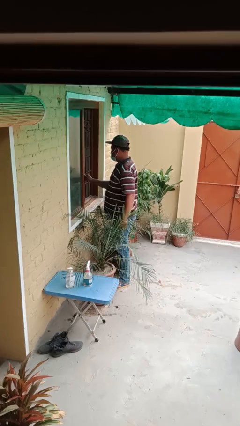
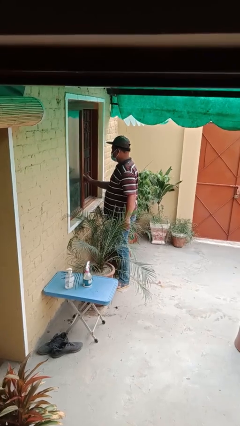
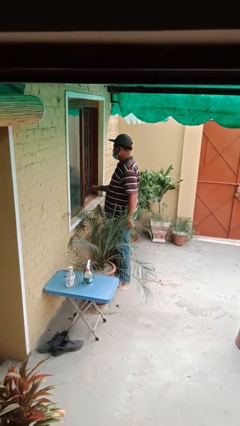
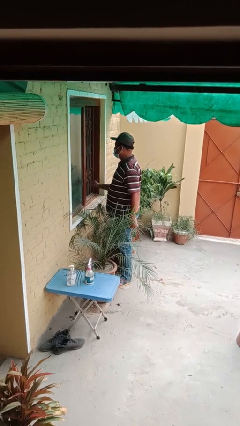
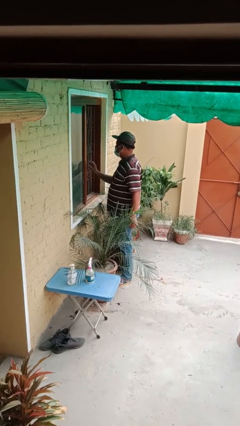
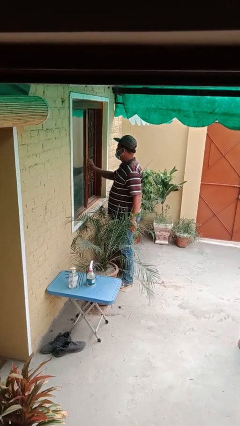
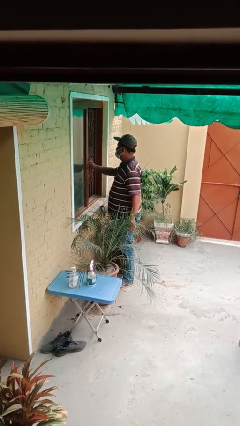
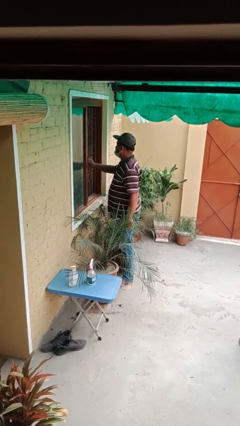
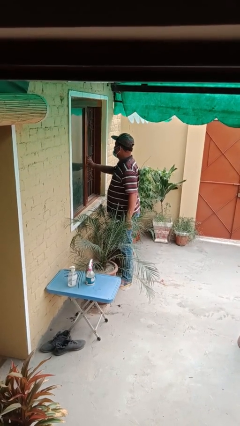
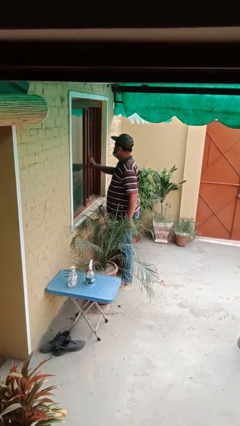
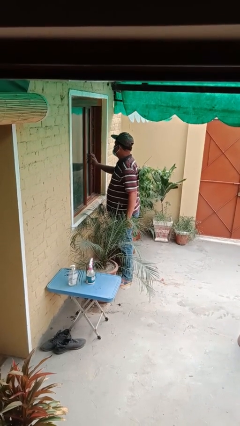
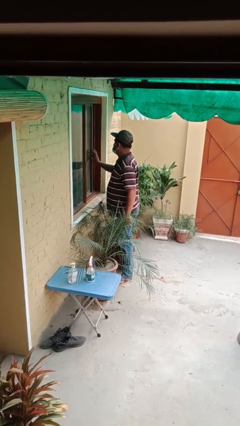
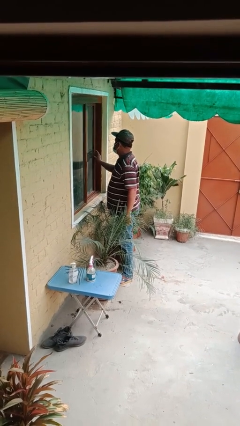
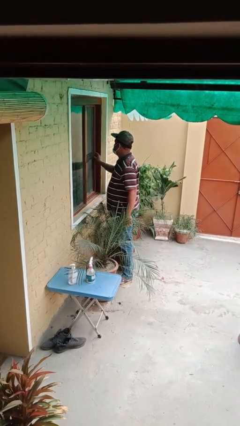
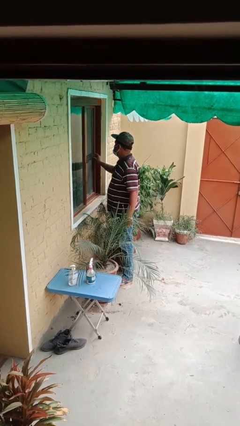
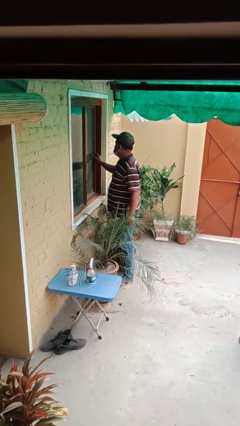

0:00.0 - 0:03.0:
person closes home window

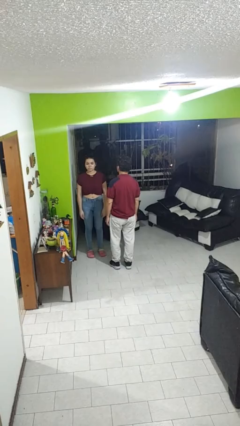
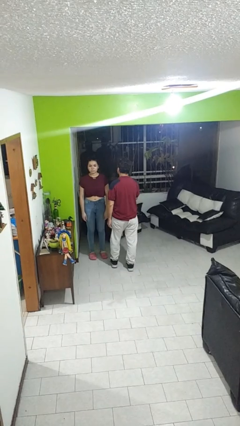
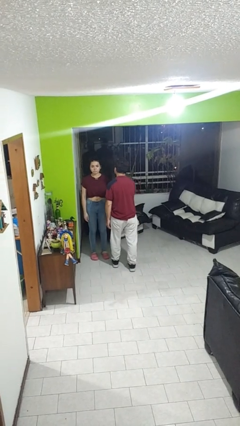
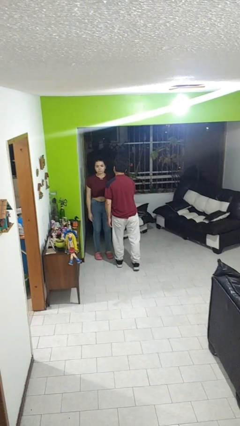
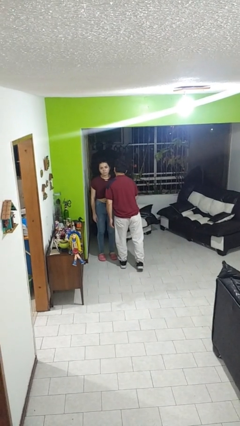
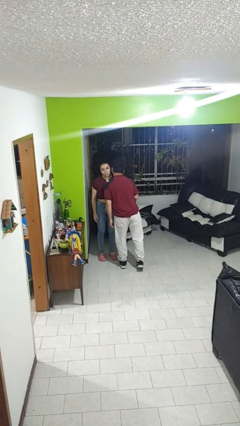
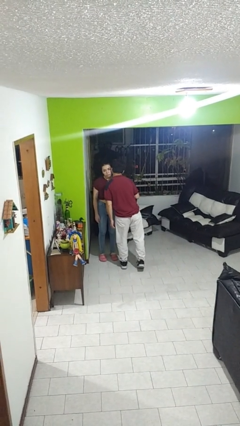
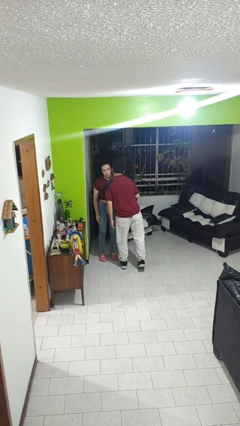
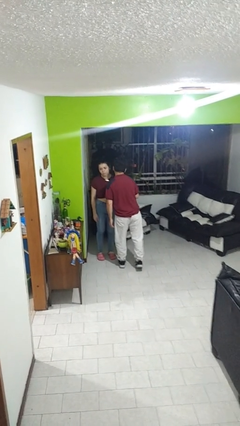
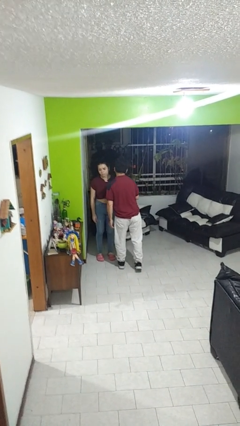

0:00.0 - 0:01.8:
person kisses cheek of person

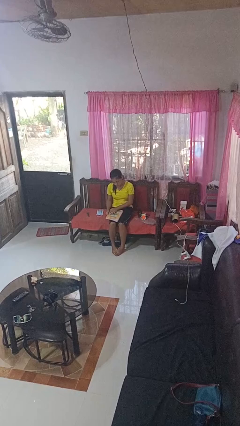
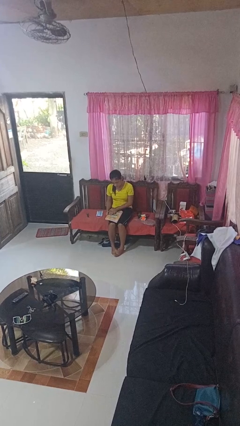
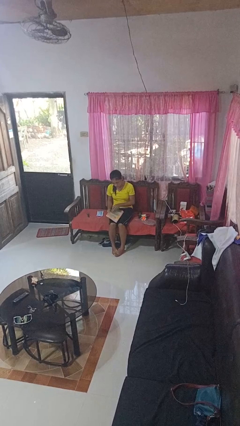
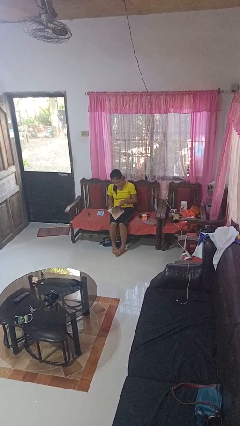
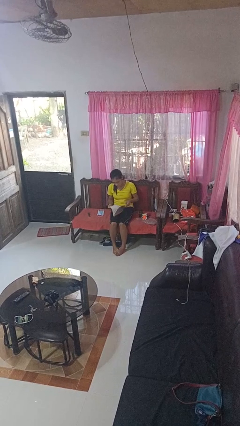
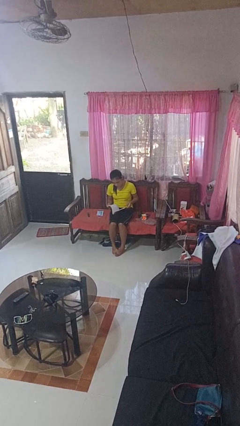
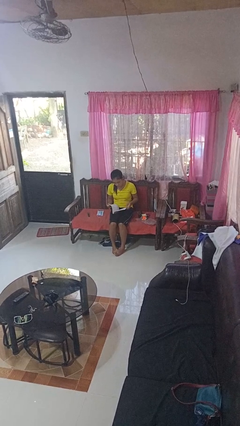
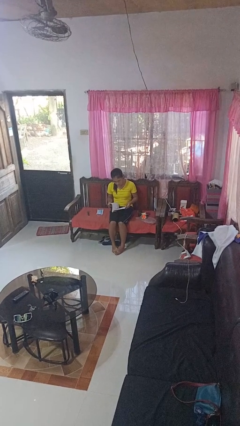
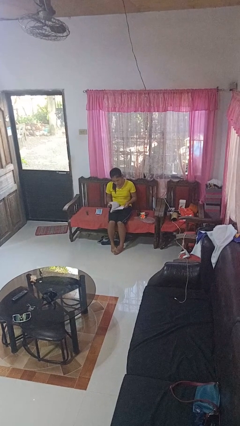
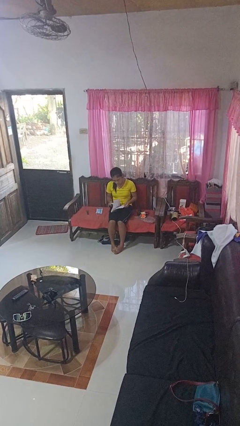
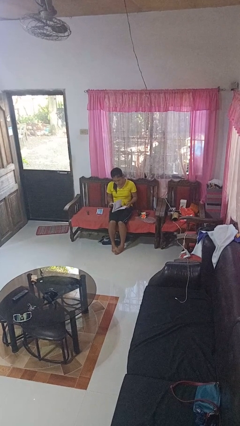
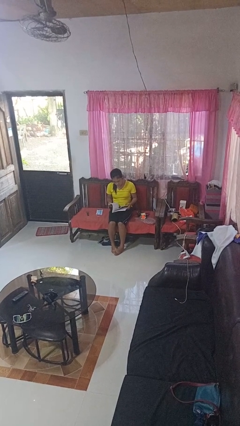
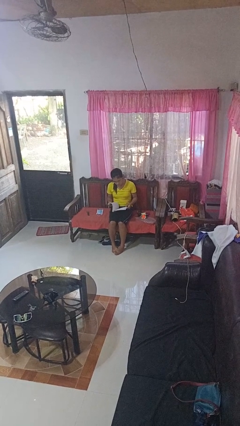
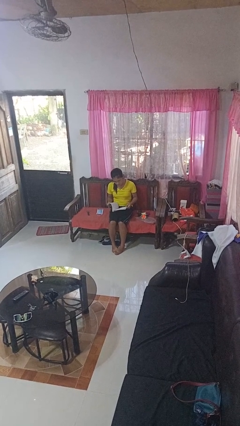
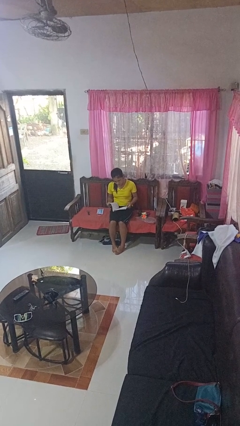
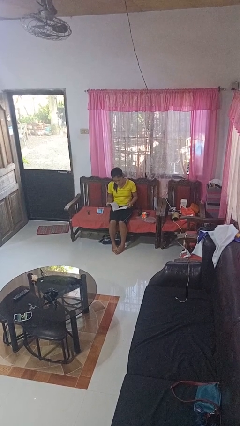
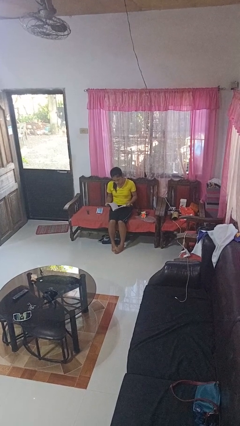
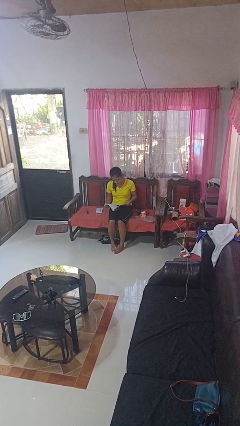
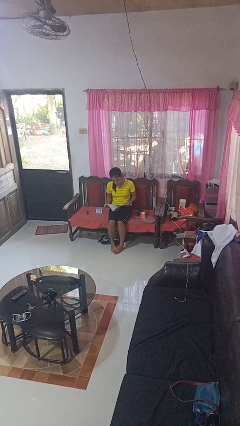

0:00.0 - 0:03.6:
person reads book

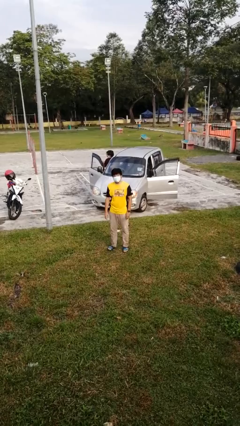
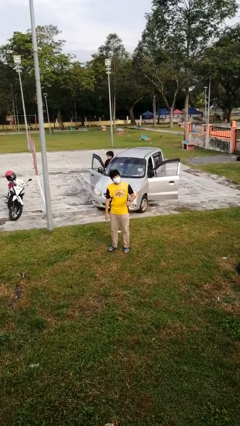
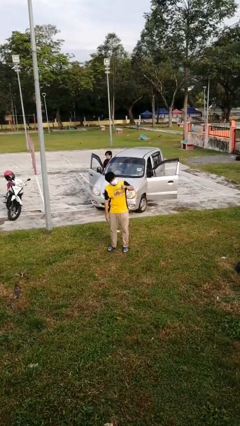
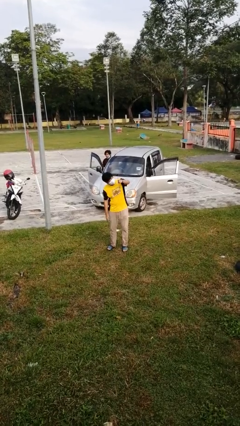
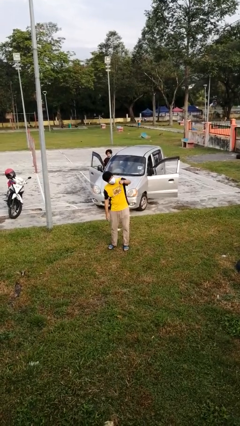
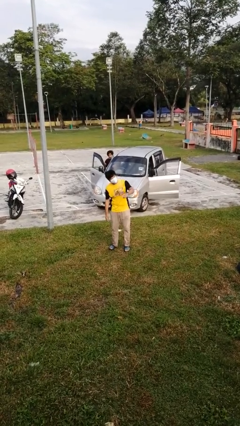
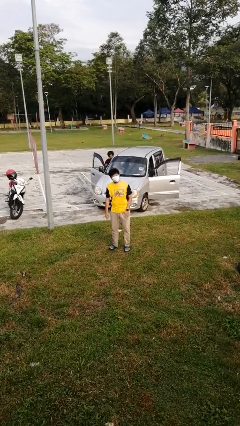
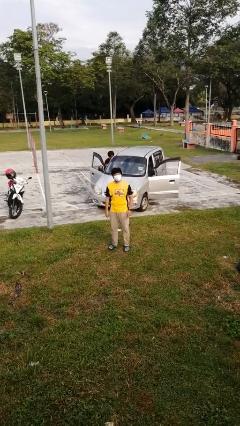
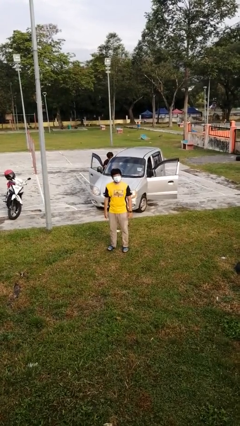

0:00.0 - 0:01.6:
person points at person

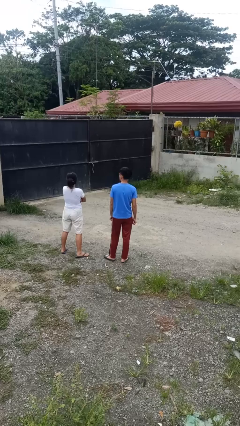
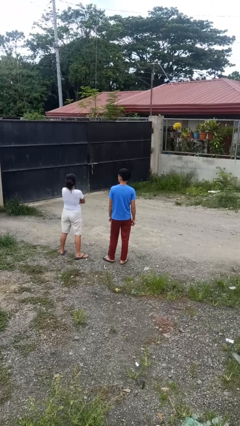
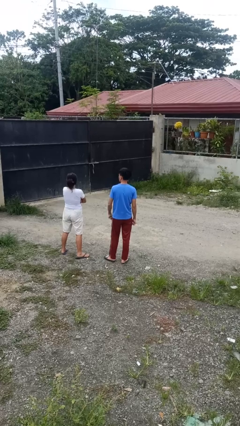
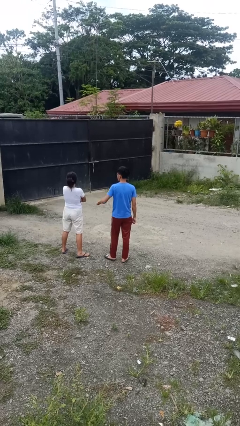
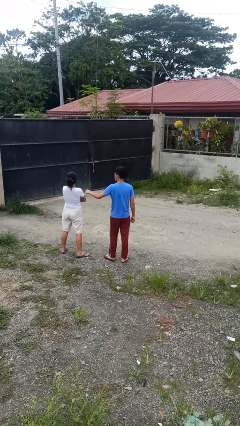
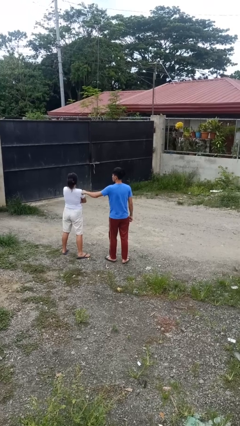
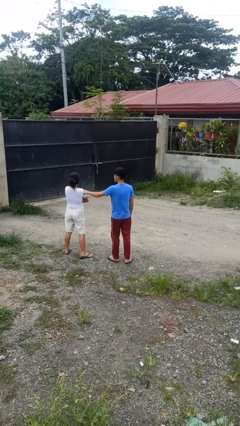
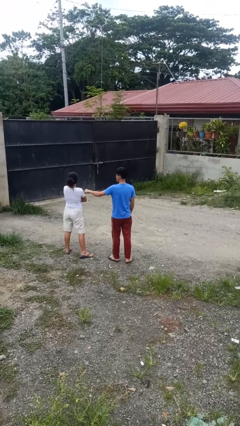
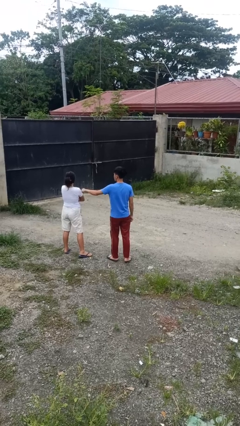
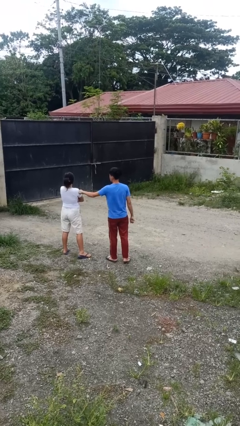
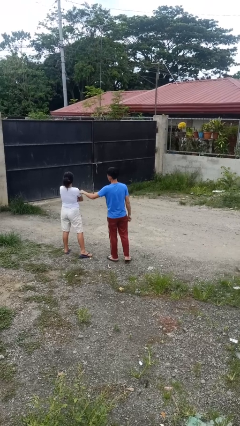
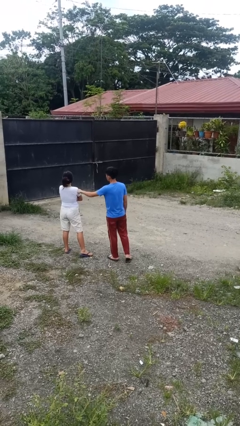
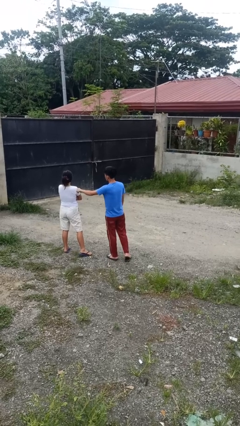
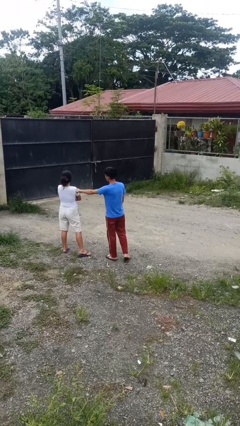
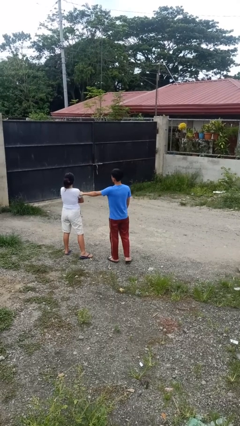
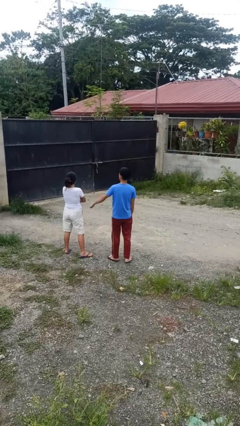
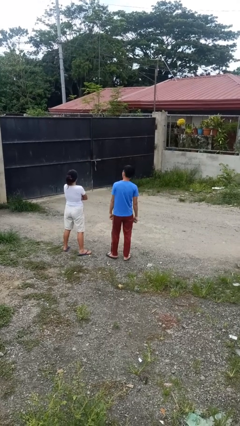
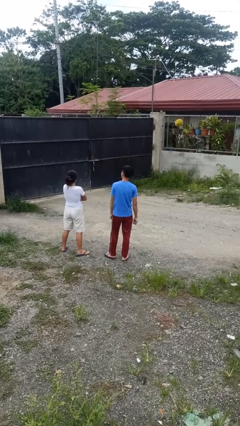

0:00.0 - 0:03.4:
person pounds shoulders of person

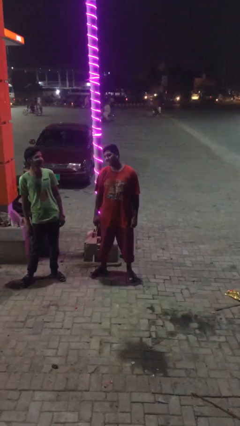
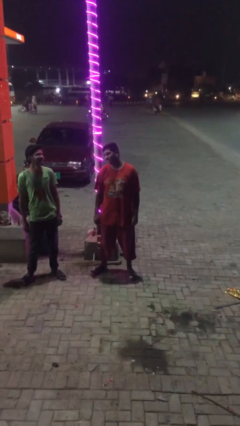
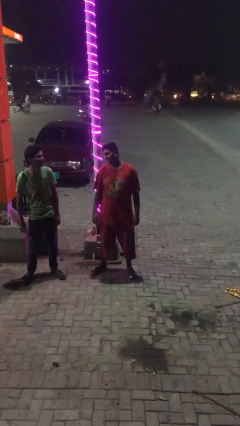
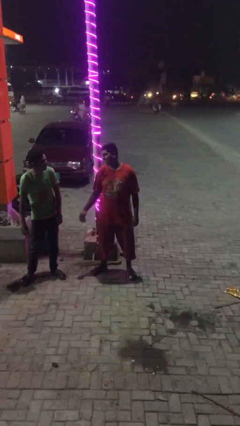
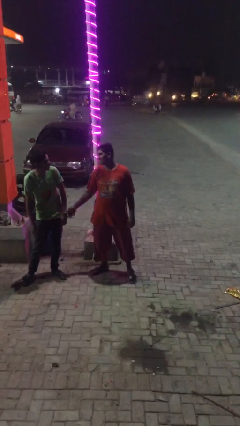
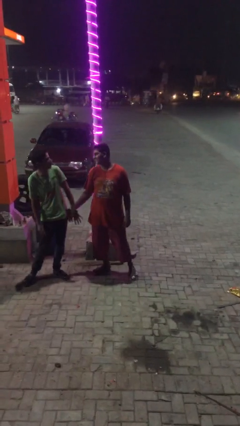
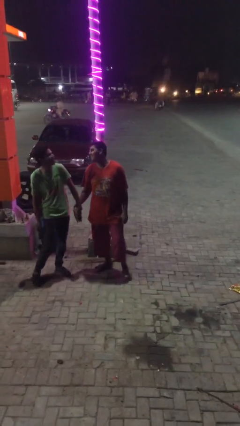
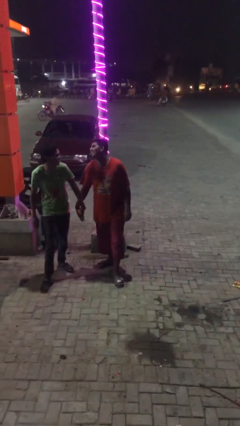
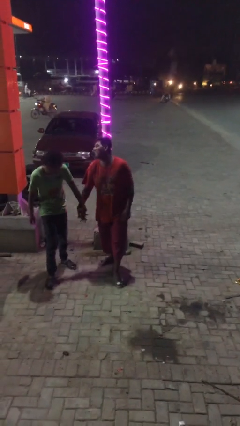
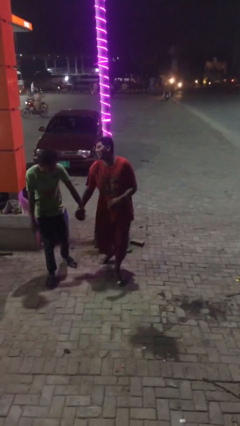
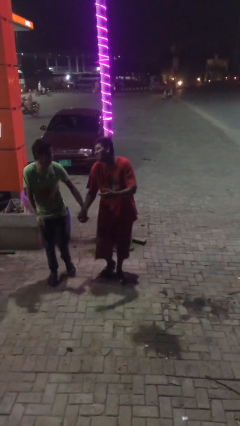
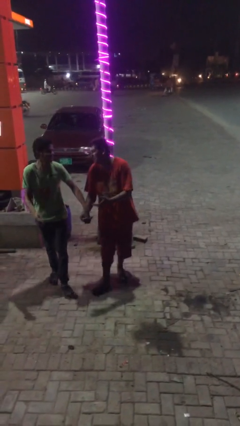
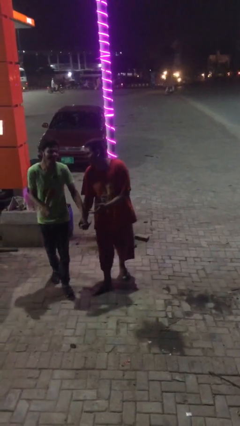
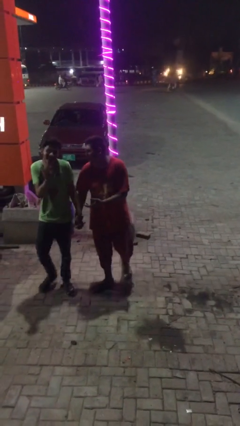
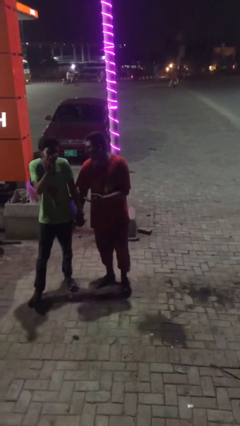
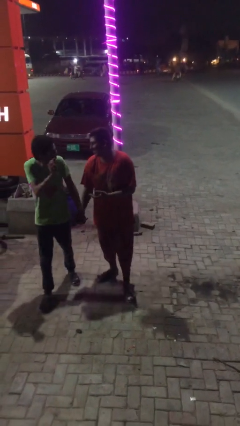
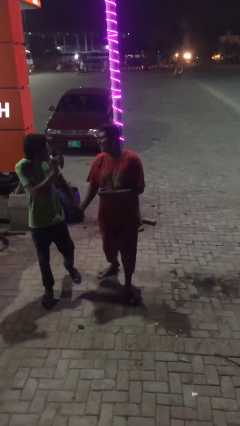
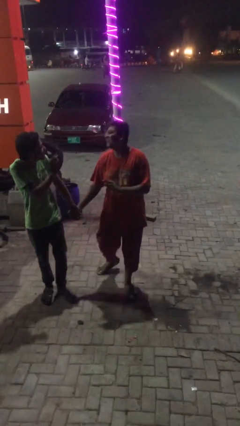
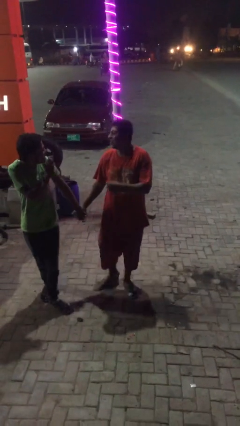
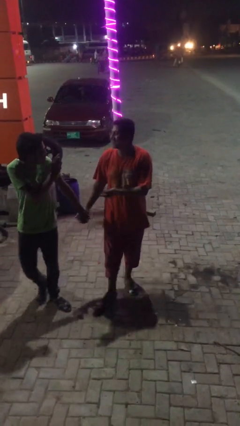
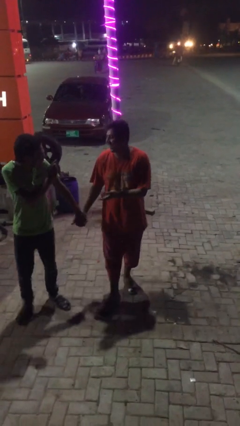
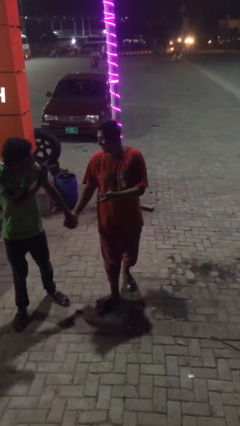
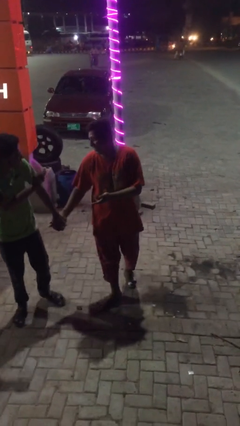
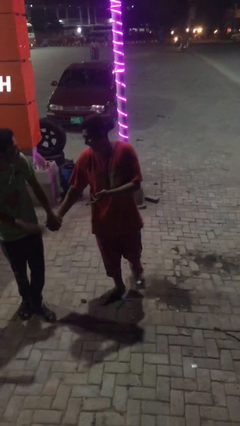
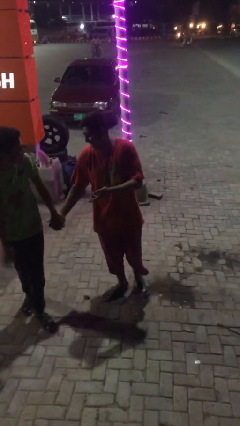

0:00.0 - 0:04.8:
person holds hand
